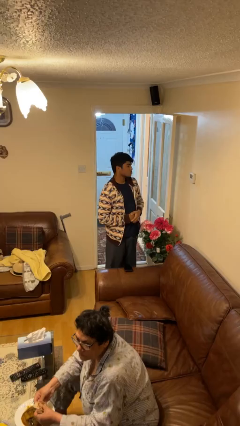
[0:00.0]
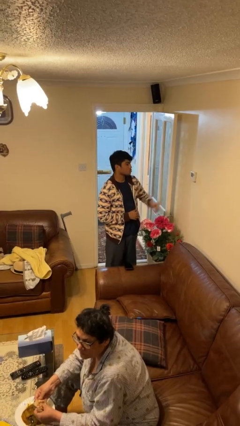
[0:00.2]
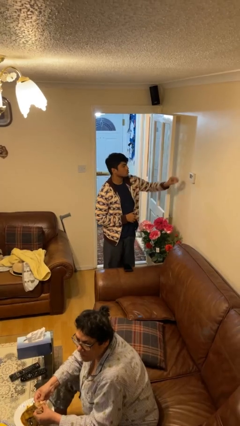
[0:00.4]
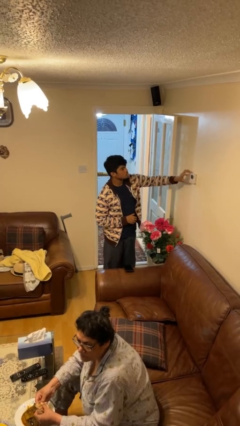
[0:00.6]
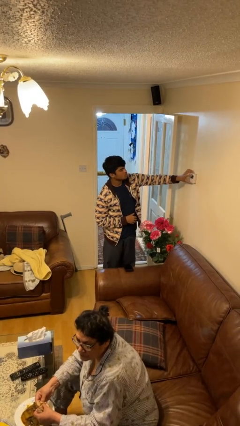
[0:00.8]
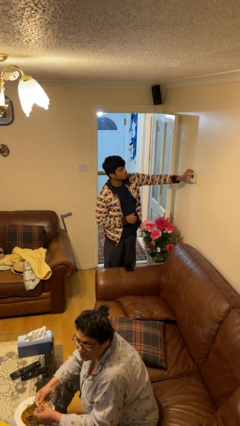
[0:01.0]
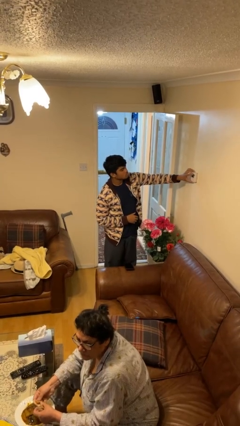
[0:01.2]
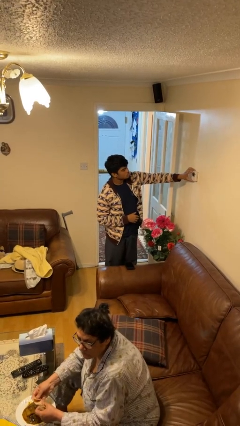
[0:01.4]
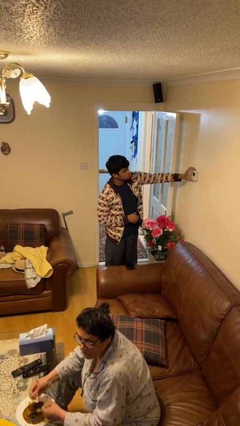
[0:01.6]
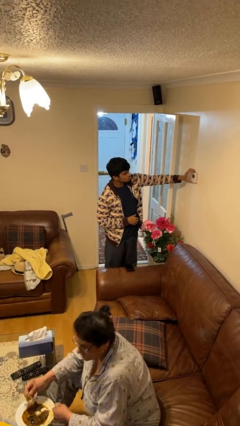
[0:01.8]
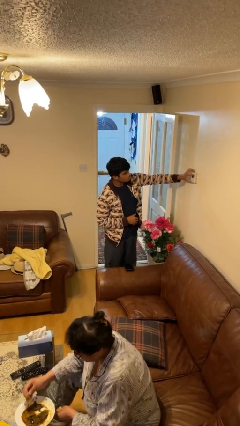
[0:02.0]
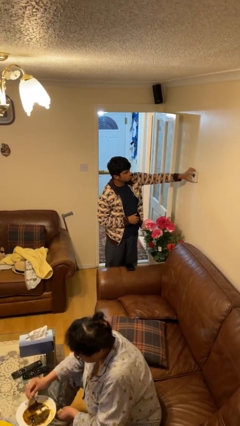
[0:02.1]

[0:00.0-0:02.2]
person adjusts thermostat

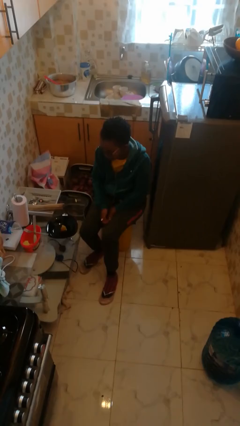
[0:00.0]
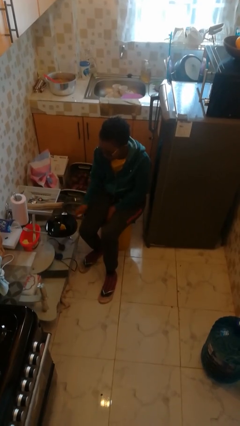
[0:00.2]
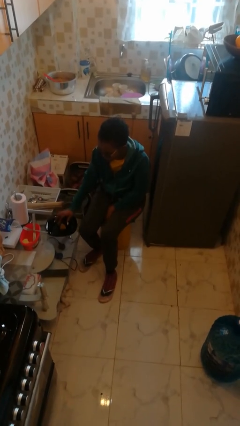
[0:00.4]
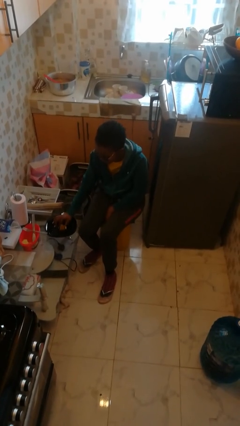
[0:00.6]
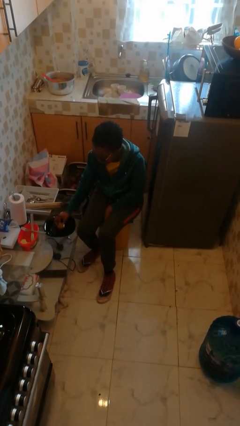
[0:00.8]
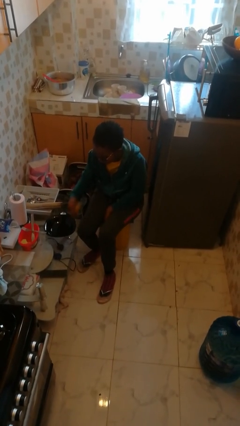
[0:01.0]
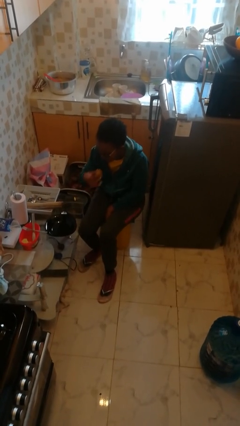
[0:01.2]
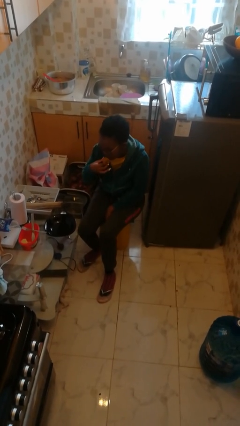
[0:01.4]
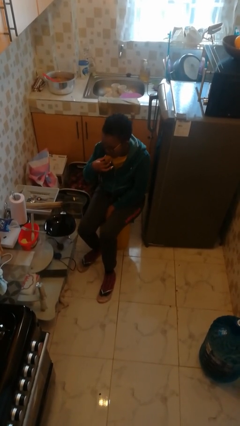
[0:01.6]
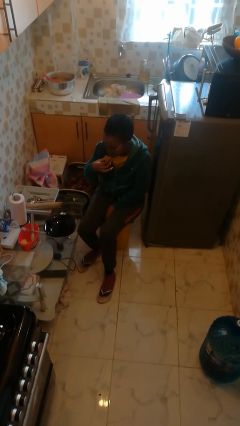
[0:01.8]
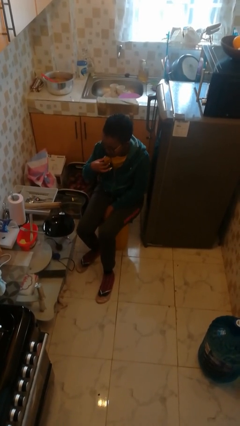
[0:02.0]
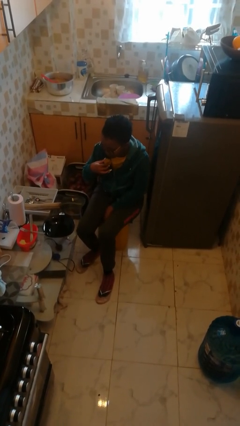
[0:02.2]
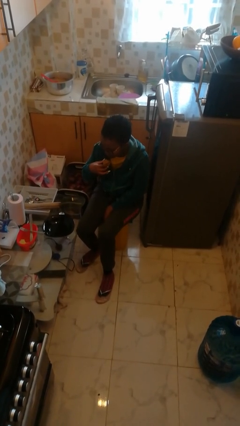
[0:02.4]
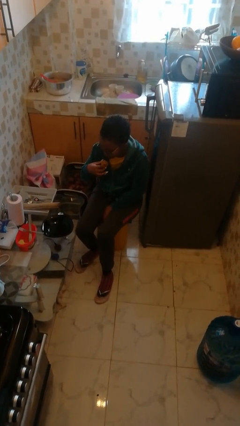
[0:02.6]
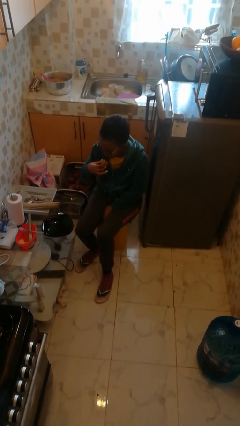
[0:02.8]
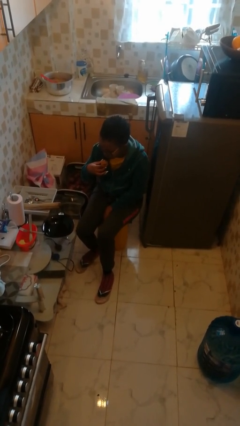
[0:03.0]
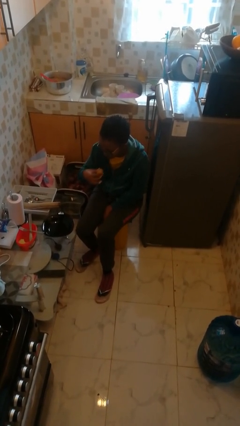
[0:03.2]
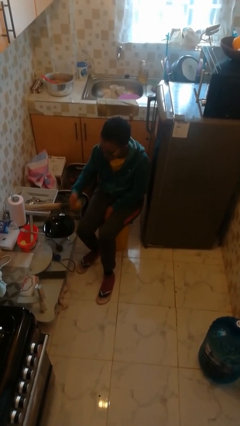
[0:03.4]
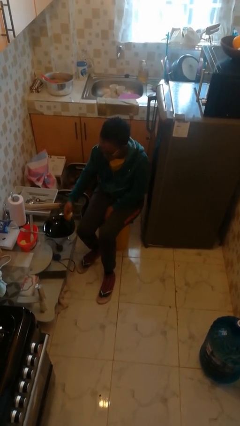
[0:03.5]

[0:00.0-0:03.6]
person eats with hands

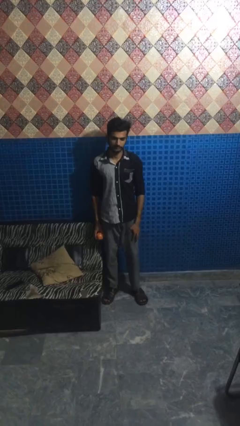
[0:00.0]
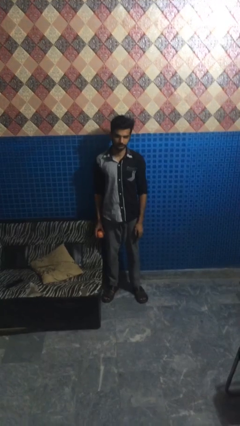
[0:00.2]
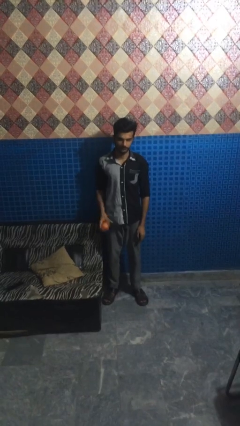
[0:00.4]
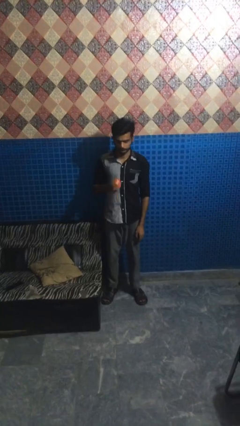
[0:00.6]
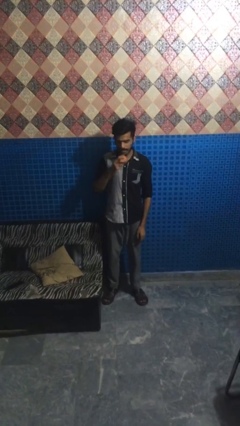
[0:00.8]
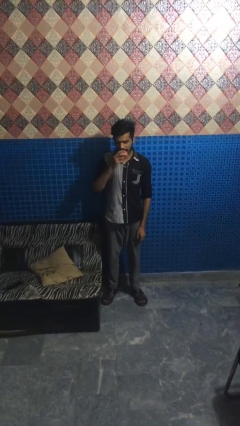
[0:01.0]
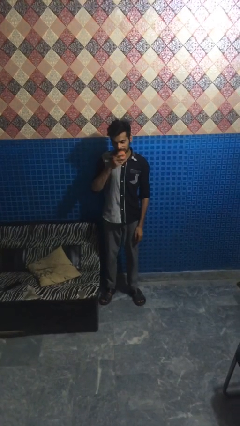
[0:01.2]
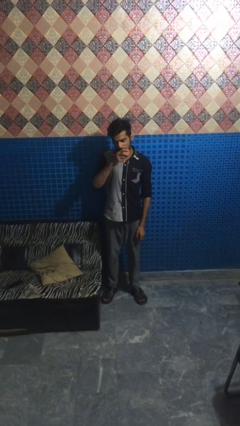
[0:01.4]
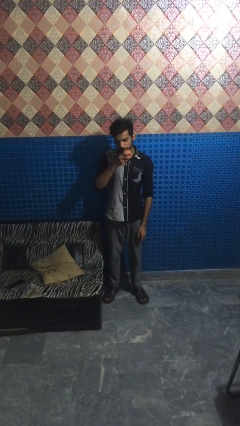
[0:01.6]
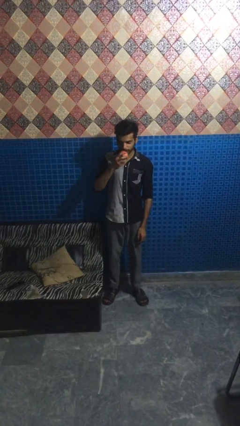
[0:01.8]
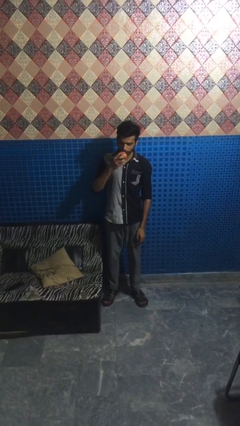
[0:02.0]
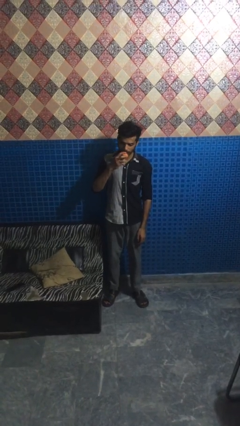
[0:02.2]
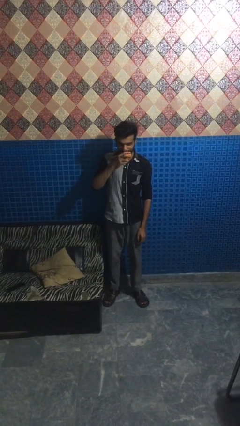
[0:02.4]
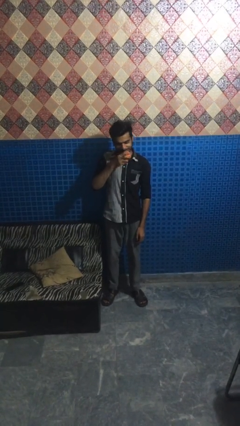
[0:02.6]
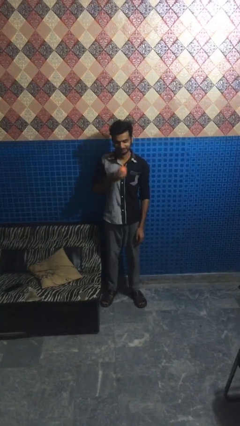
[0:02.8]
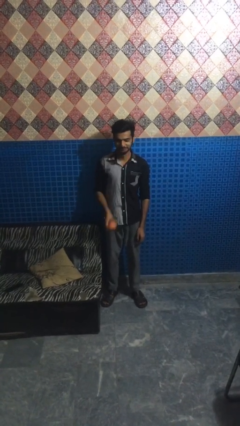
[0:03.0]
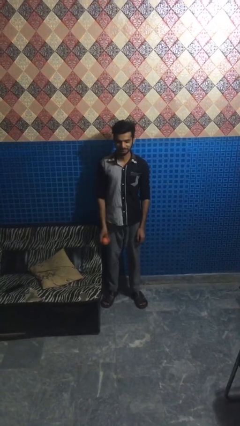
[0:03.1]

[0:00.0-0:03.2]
person eats apple

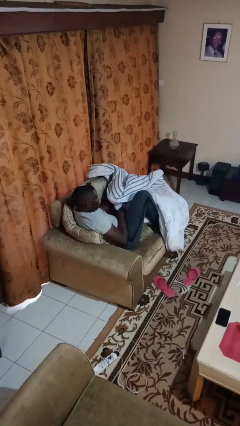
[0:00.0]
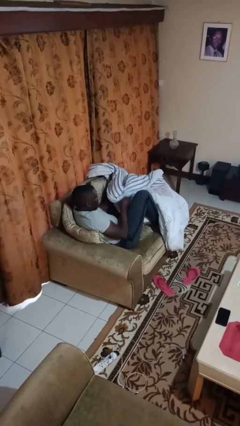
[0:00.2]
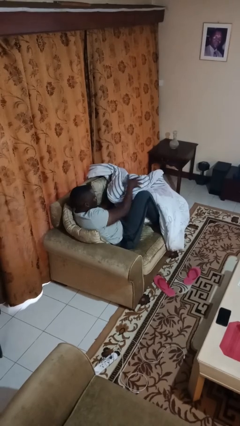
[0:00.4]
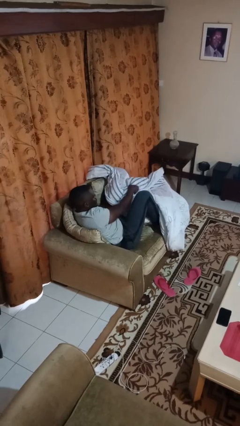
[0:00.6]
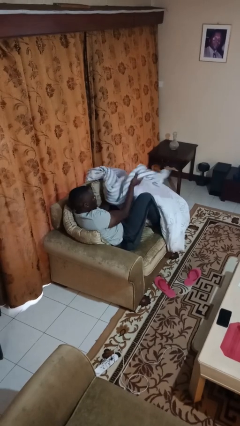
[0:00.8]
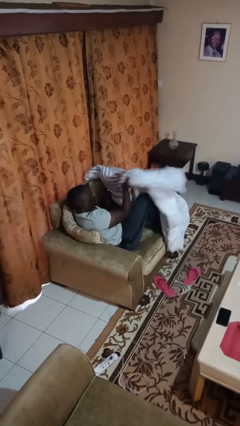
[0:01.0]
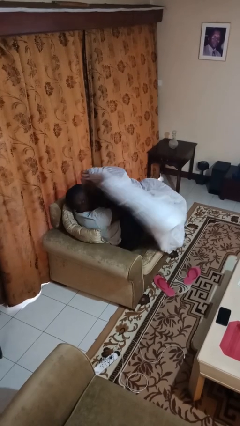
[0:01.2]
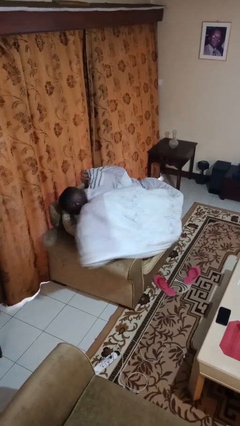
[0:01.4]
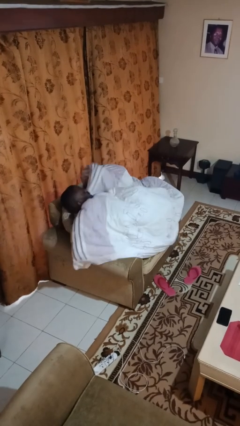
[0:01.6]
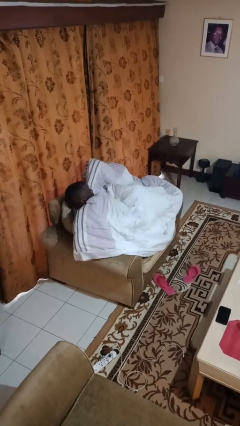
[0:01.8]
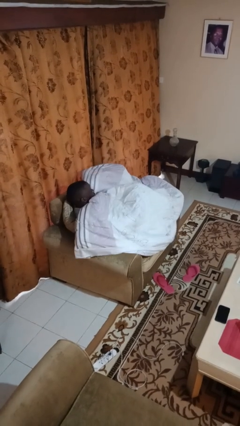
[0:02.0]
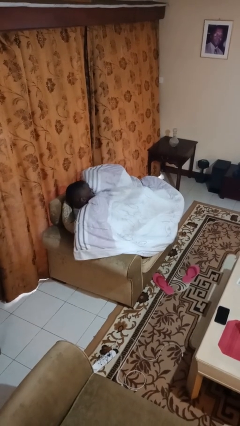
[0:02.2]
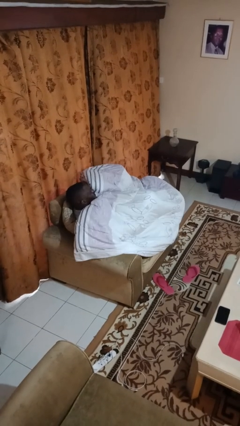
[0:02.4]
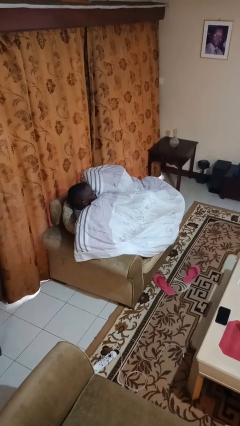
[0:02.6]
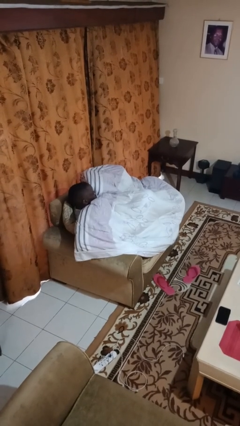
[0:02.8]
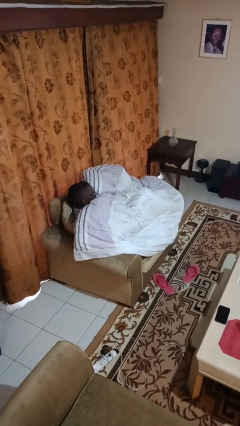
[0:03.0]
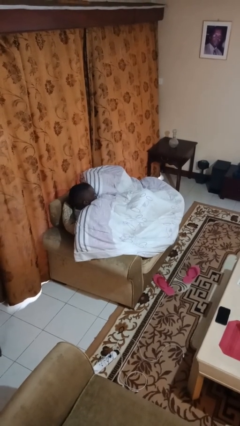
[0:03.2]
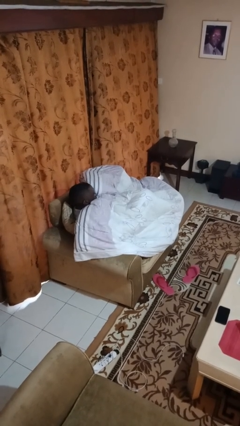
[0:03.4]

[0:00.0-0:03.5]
person covers with blanket

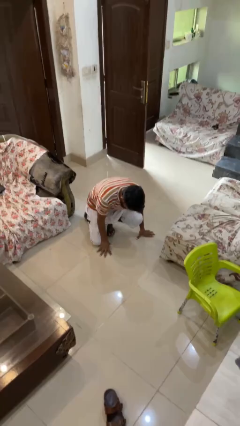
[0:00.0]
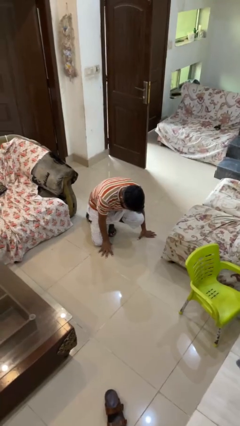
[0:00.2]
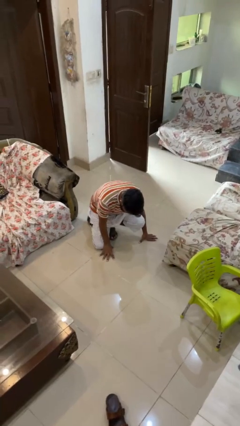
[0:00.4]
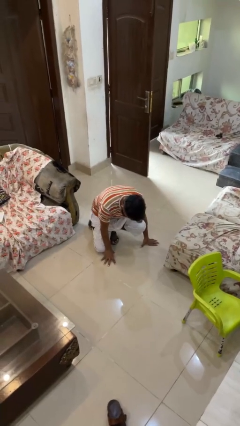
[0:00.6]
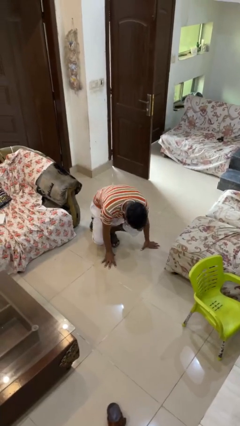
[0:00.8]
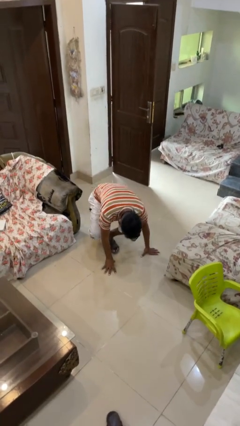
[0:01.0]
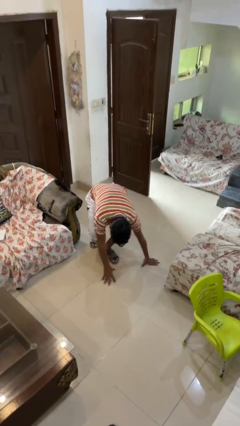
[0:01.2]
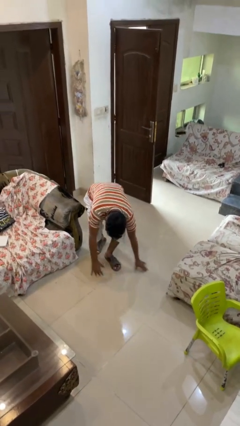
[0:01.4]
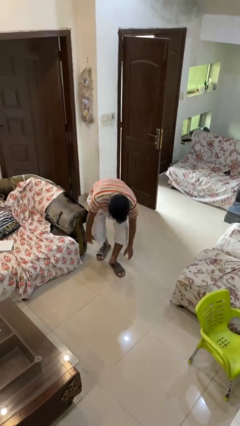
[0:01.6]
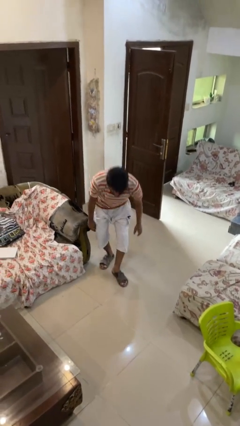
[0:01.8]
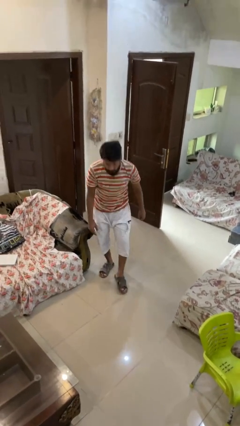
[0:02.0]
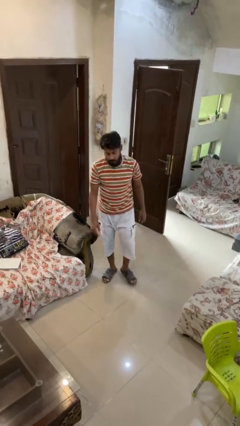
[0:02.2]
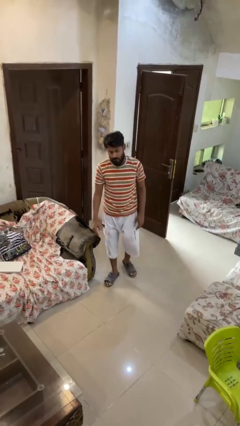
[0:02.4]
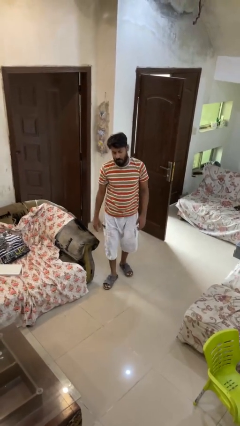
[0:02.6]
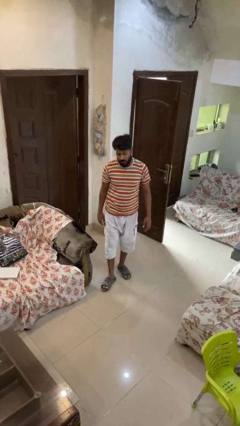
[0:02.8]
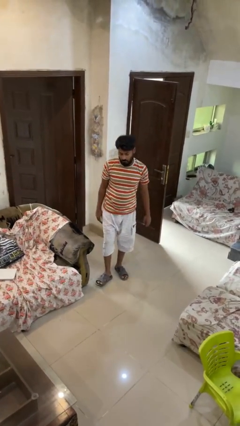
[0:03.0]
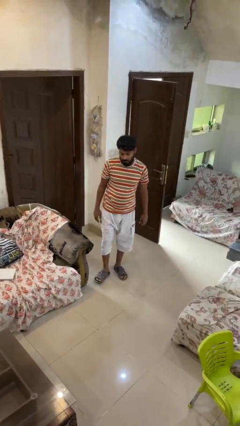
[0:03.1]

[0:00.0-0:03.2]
person stands up from floor

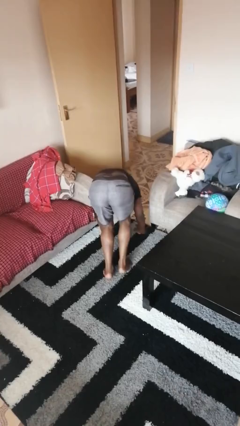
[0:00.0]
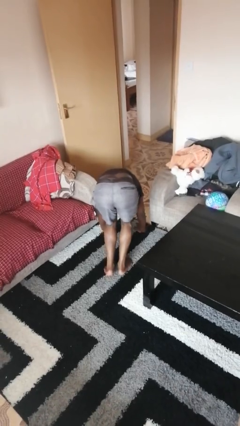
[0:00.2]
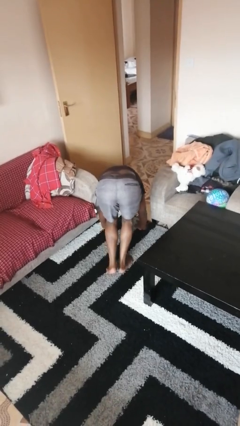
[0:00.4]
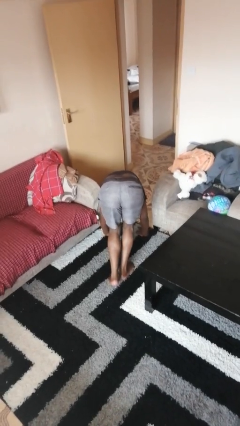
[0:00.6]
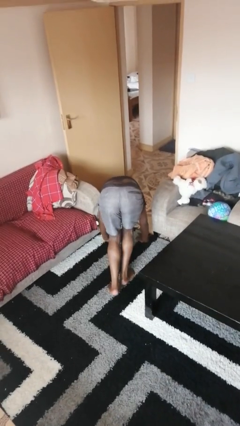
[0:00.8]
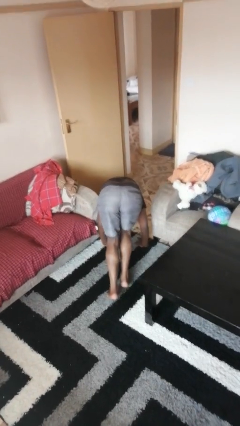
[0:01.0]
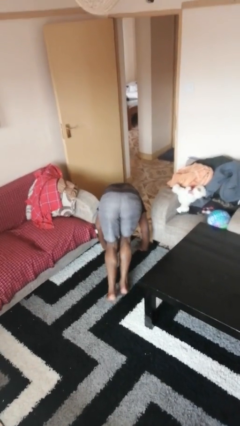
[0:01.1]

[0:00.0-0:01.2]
person handstand

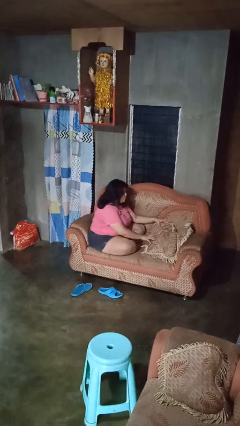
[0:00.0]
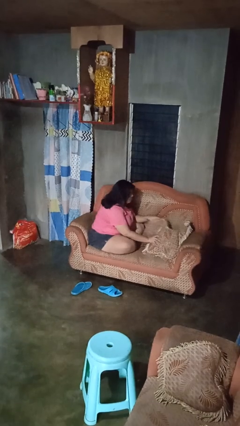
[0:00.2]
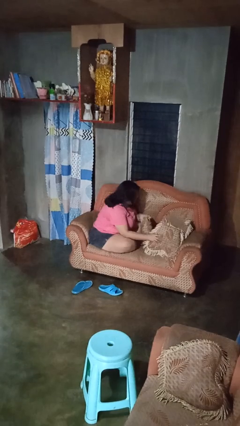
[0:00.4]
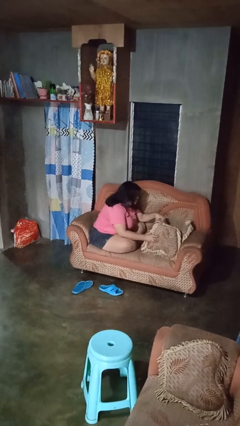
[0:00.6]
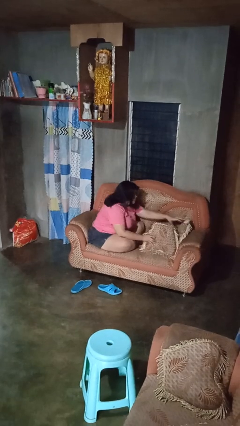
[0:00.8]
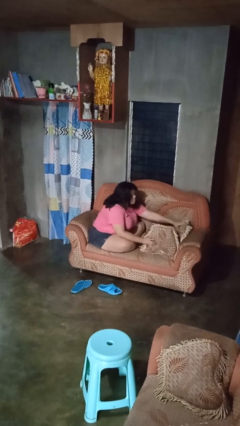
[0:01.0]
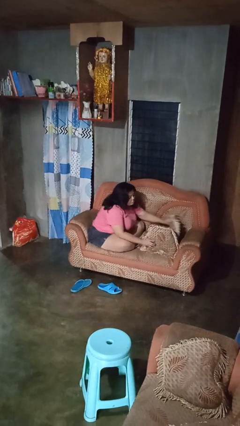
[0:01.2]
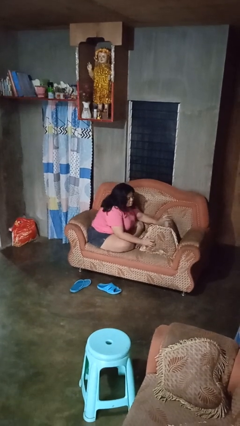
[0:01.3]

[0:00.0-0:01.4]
person searches in couch
